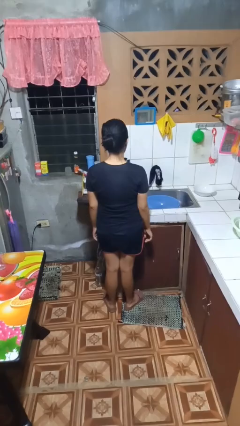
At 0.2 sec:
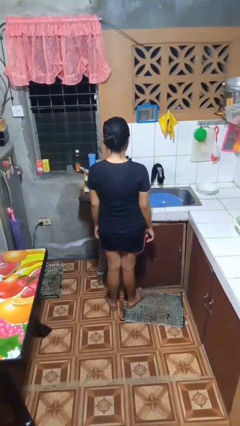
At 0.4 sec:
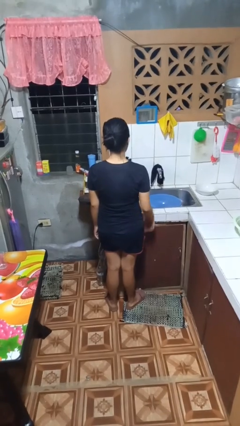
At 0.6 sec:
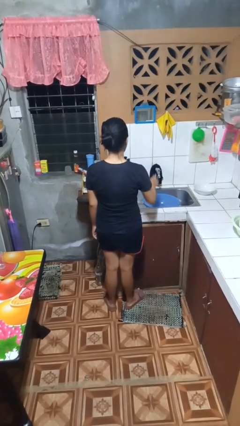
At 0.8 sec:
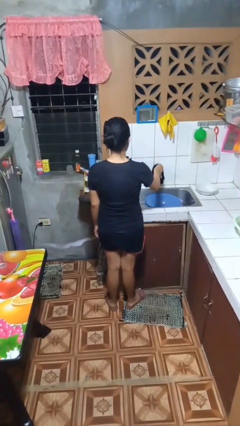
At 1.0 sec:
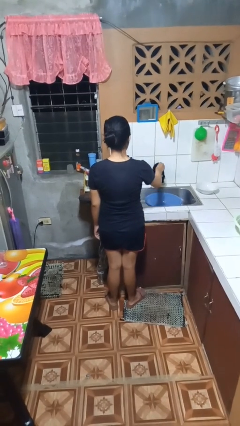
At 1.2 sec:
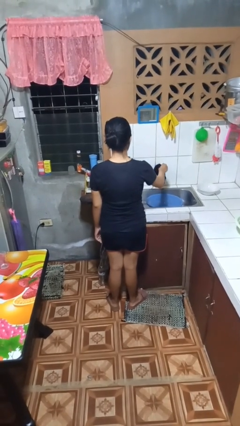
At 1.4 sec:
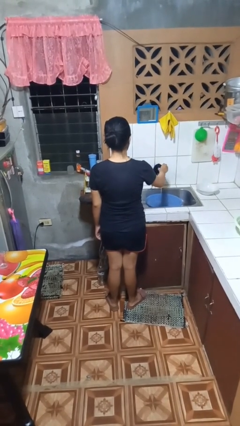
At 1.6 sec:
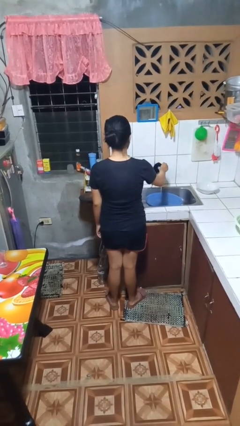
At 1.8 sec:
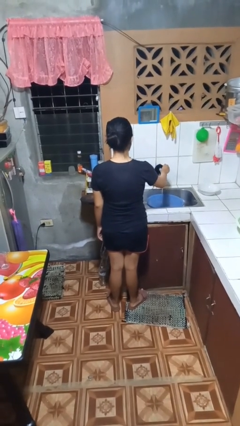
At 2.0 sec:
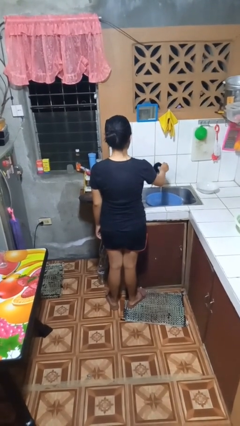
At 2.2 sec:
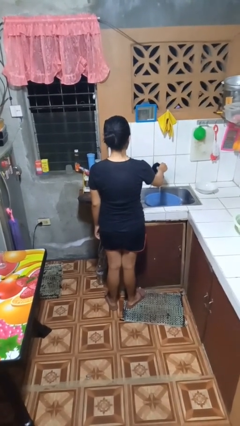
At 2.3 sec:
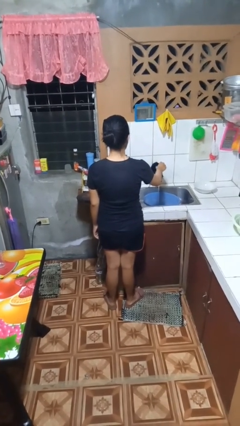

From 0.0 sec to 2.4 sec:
person turns on faucet

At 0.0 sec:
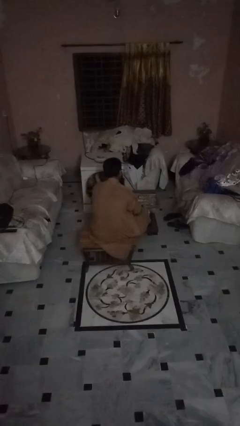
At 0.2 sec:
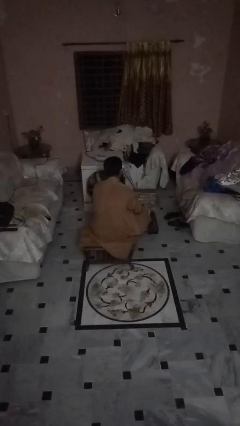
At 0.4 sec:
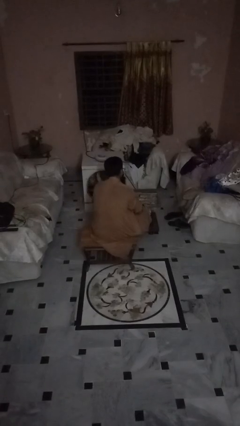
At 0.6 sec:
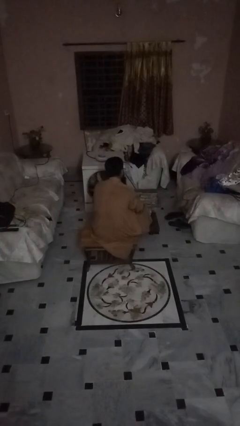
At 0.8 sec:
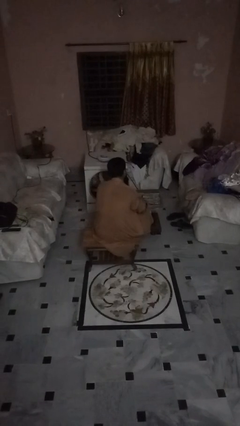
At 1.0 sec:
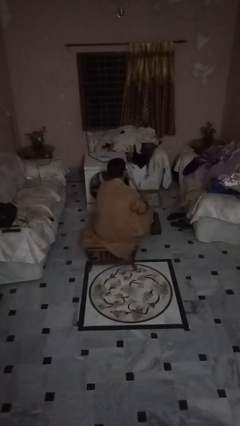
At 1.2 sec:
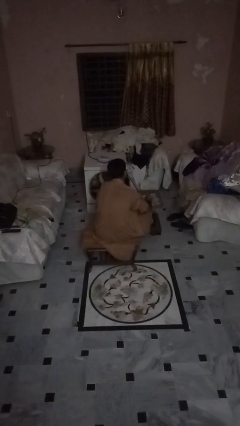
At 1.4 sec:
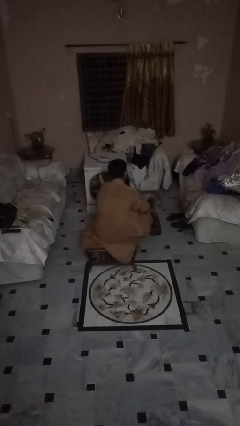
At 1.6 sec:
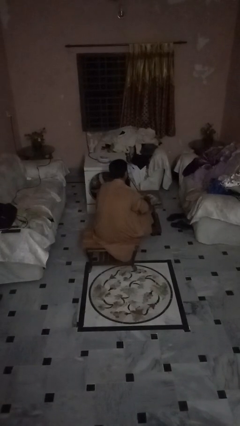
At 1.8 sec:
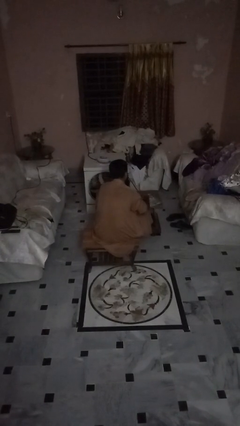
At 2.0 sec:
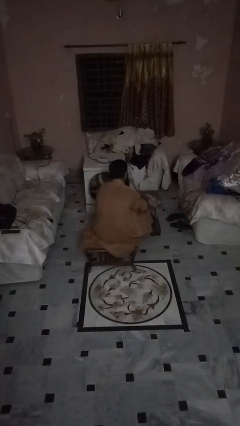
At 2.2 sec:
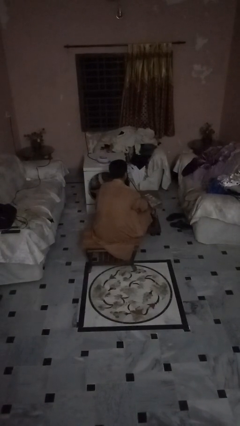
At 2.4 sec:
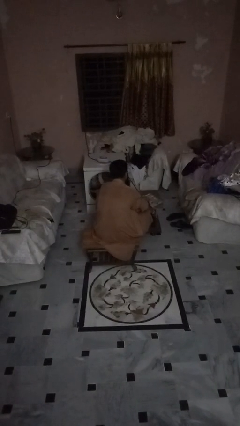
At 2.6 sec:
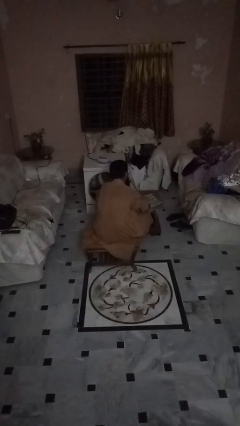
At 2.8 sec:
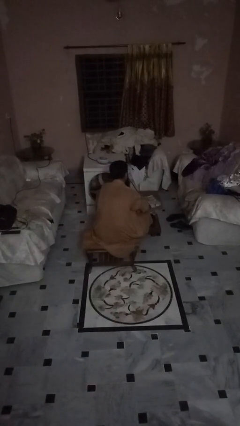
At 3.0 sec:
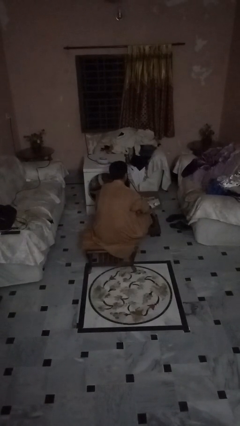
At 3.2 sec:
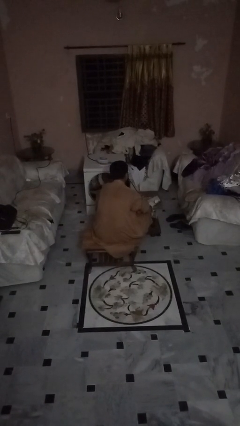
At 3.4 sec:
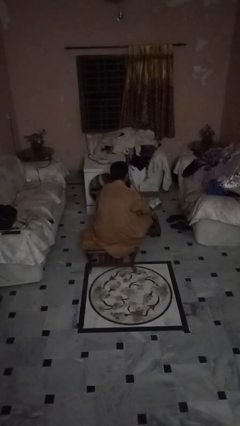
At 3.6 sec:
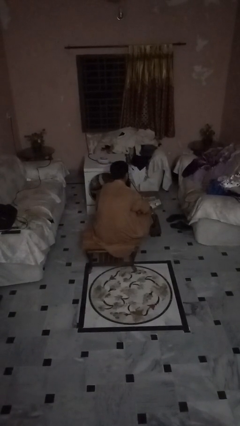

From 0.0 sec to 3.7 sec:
person tears paper

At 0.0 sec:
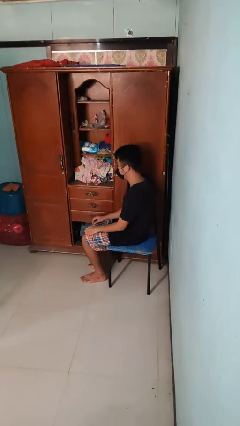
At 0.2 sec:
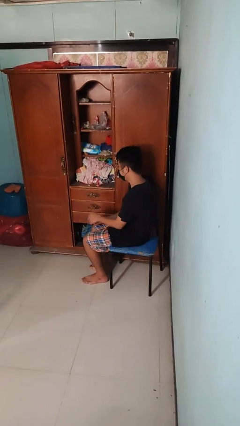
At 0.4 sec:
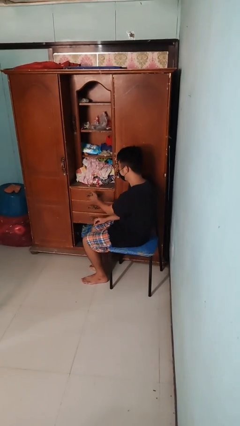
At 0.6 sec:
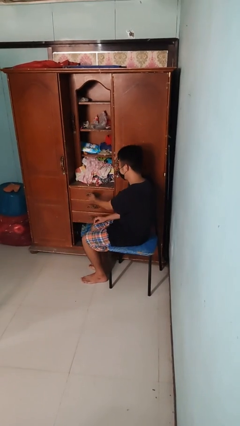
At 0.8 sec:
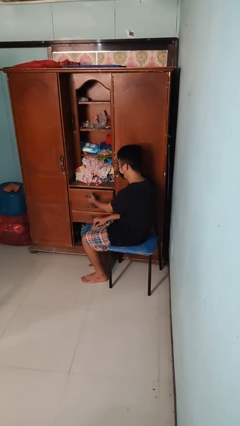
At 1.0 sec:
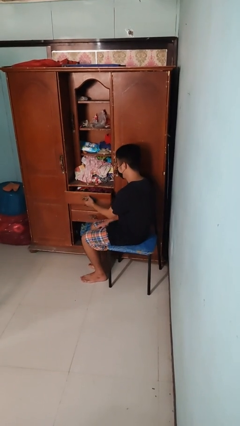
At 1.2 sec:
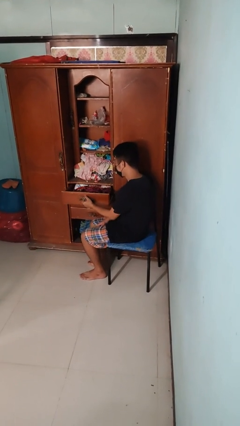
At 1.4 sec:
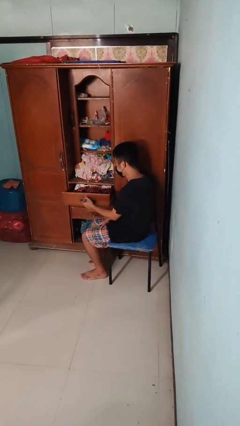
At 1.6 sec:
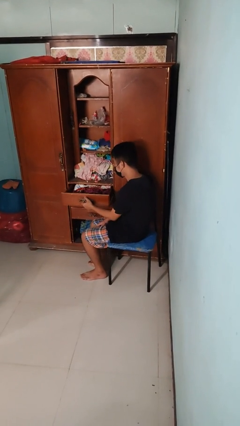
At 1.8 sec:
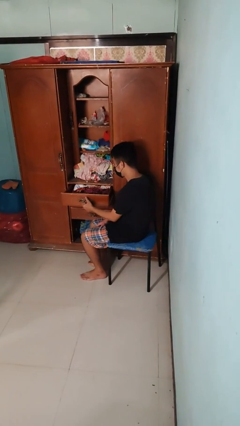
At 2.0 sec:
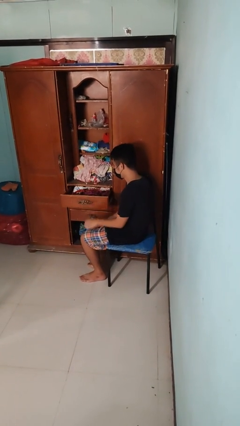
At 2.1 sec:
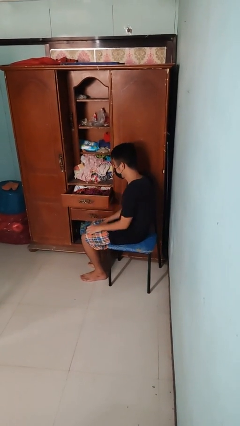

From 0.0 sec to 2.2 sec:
person opens dresser drawer

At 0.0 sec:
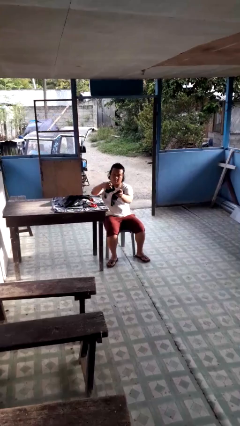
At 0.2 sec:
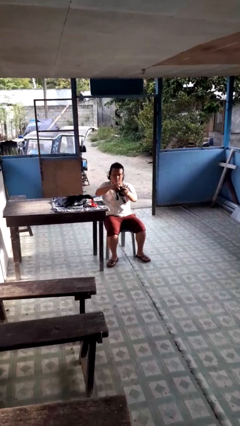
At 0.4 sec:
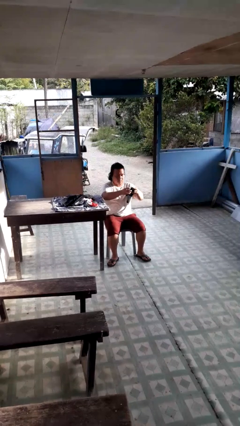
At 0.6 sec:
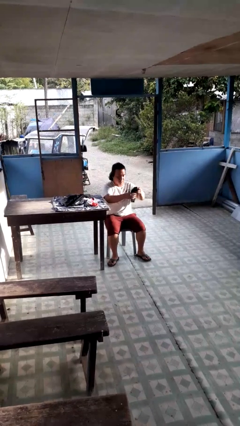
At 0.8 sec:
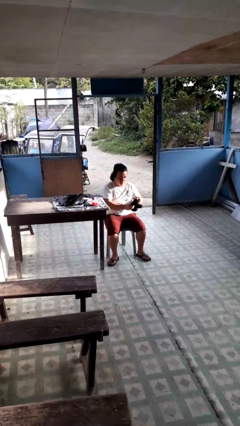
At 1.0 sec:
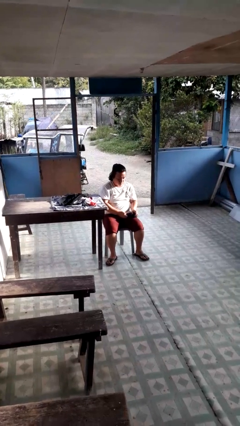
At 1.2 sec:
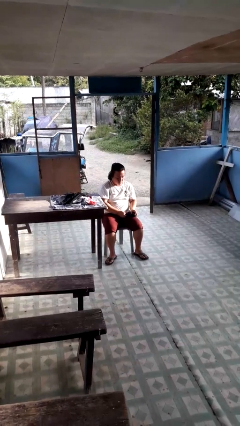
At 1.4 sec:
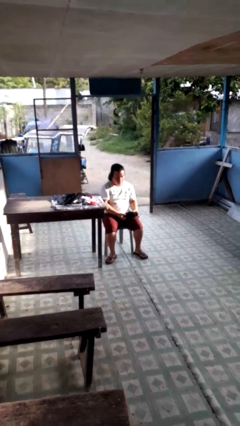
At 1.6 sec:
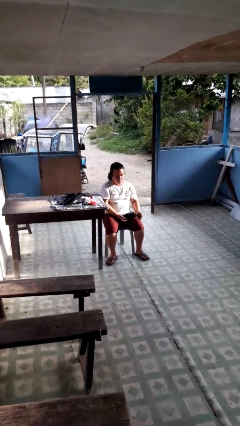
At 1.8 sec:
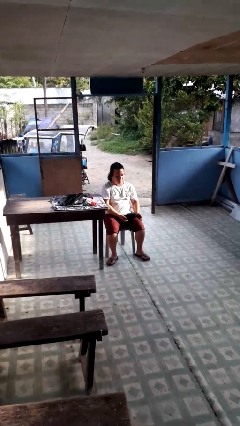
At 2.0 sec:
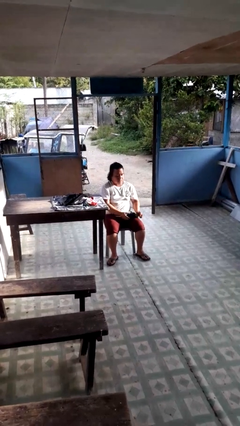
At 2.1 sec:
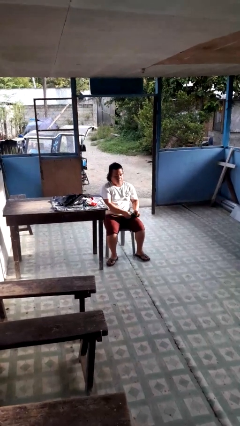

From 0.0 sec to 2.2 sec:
person folds socks

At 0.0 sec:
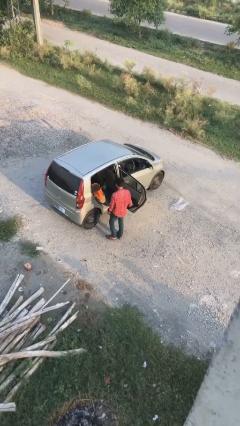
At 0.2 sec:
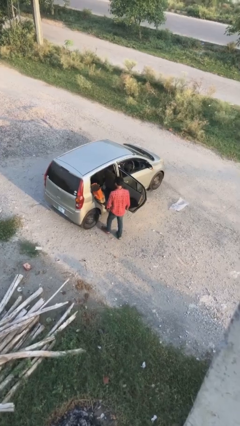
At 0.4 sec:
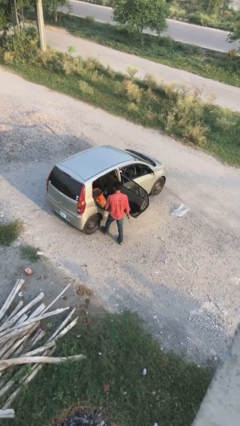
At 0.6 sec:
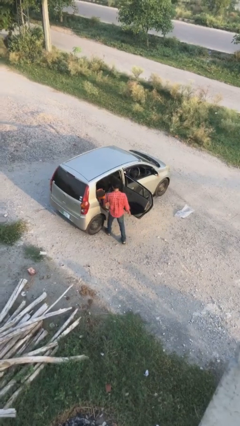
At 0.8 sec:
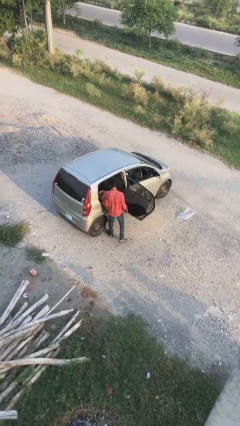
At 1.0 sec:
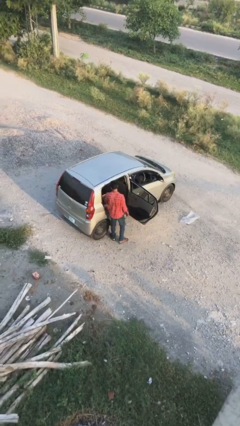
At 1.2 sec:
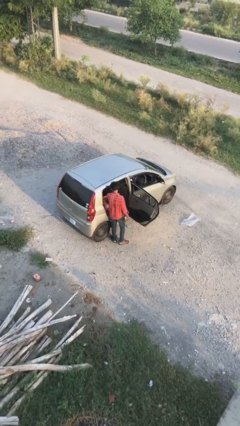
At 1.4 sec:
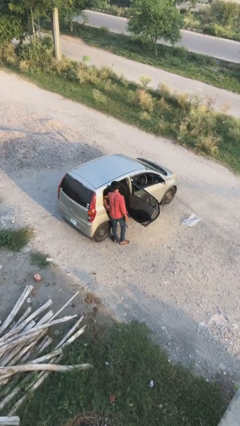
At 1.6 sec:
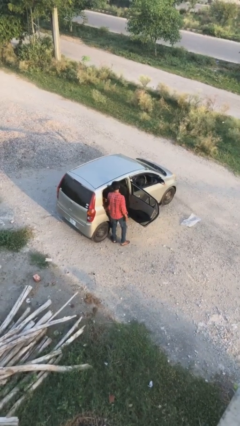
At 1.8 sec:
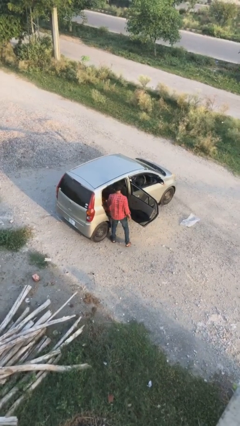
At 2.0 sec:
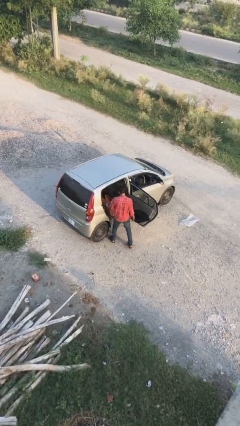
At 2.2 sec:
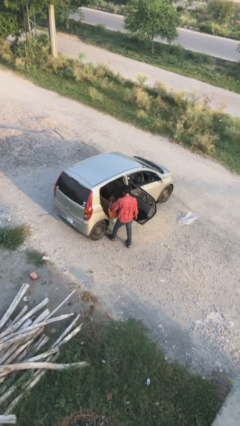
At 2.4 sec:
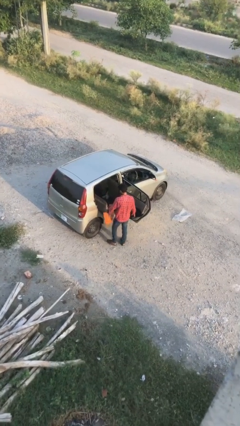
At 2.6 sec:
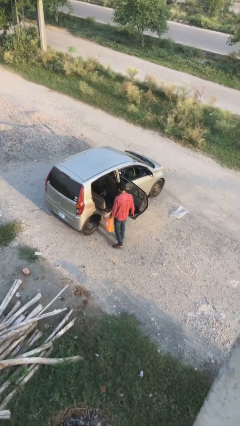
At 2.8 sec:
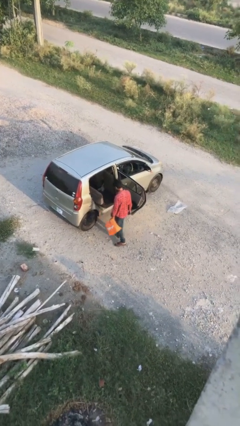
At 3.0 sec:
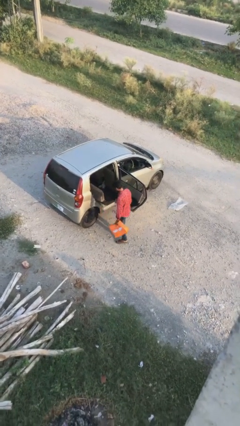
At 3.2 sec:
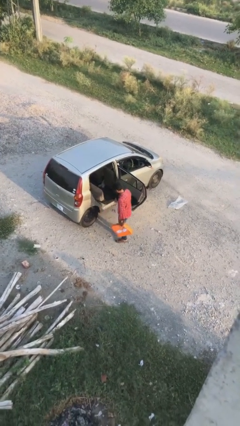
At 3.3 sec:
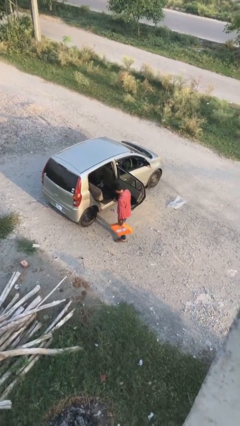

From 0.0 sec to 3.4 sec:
person unloads car

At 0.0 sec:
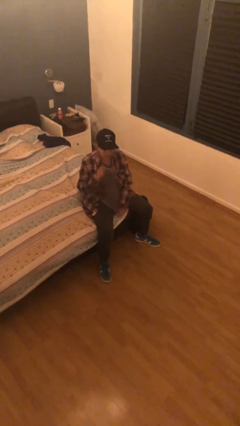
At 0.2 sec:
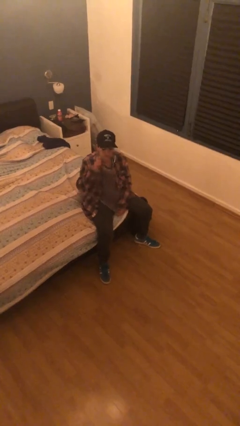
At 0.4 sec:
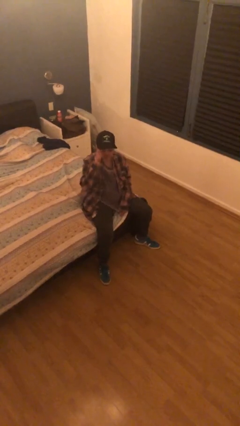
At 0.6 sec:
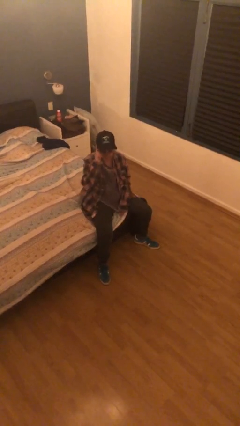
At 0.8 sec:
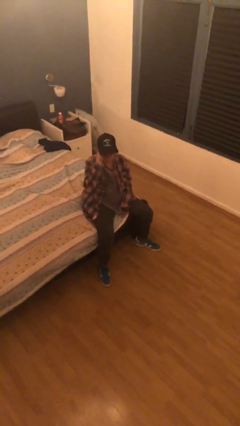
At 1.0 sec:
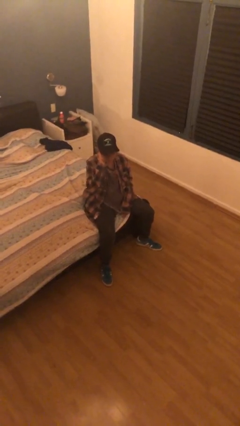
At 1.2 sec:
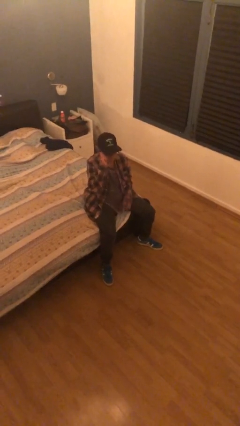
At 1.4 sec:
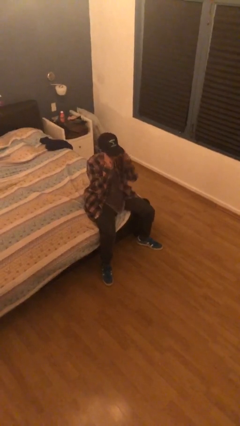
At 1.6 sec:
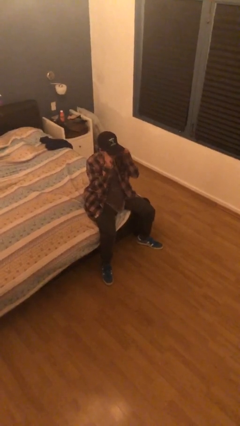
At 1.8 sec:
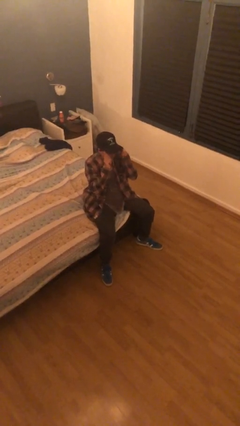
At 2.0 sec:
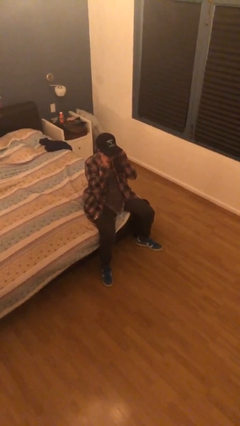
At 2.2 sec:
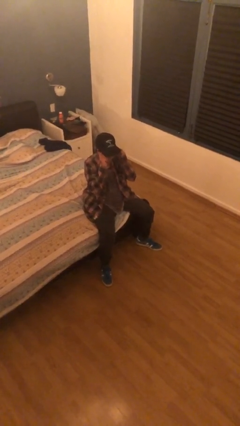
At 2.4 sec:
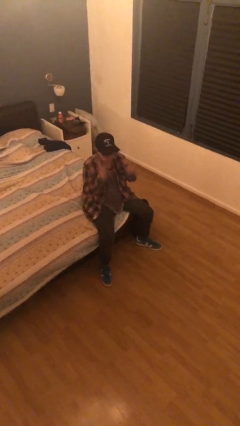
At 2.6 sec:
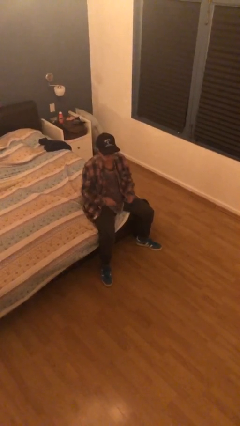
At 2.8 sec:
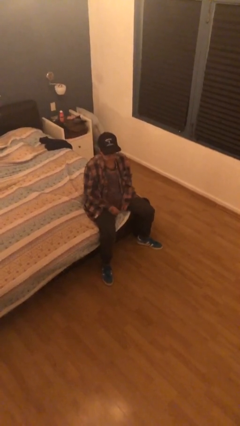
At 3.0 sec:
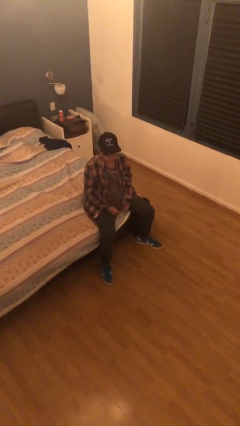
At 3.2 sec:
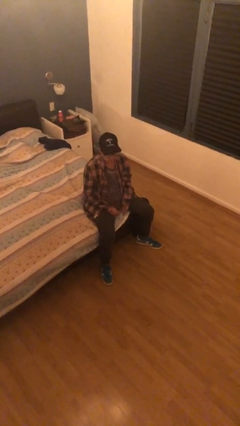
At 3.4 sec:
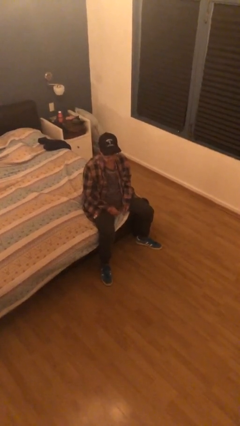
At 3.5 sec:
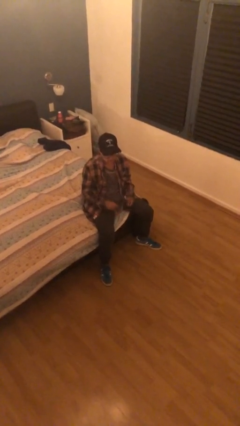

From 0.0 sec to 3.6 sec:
person puts on glasses
